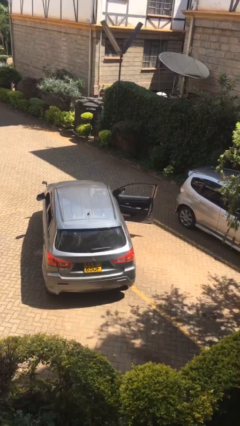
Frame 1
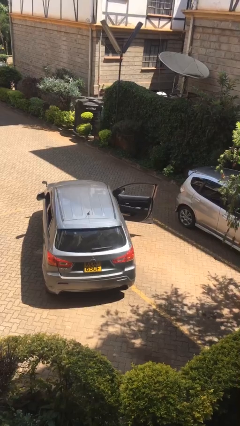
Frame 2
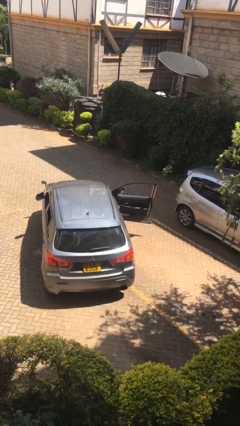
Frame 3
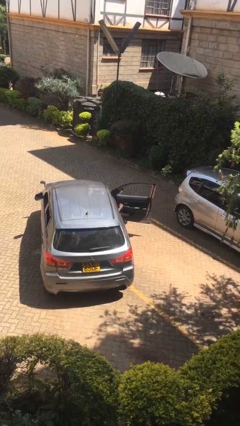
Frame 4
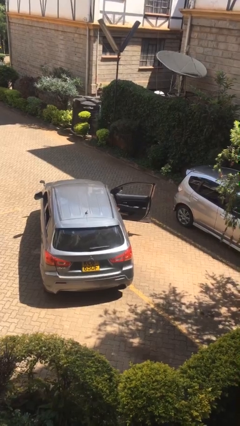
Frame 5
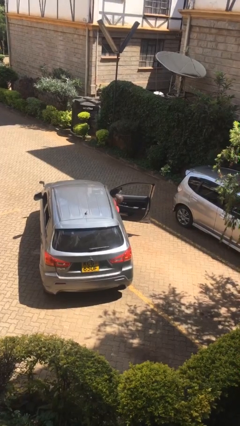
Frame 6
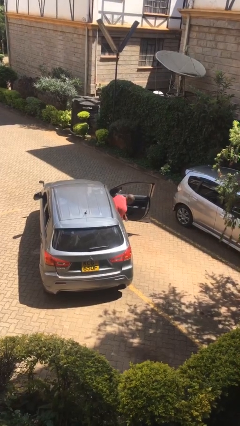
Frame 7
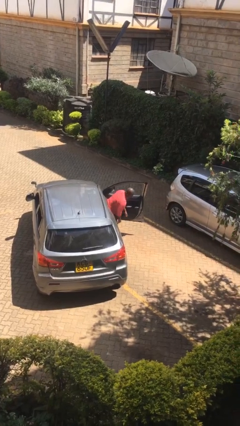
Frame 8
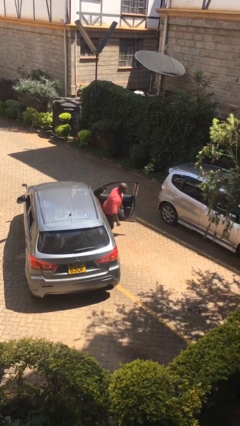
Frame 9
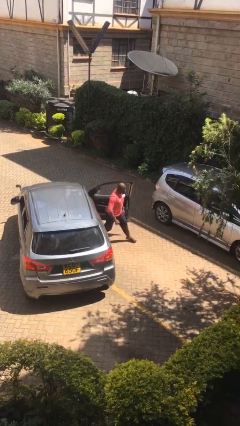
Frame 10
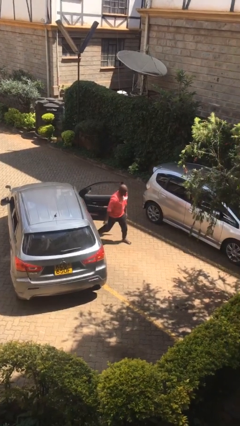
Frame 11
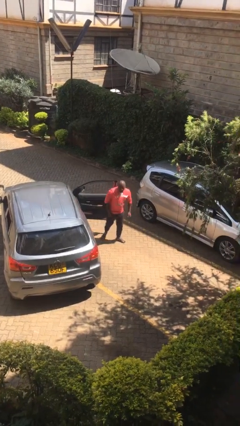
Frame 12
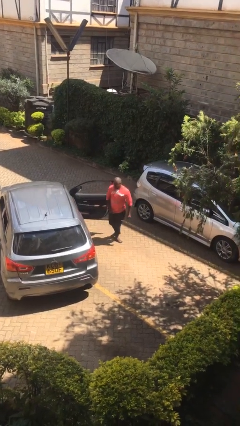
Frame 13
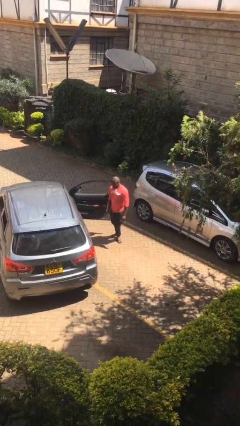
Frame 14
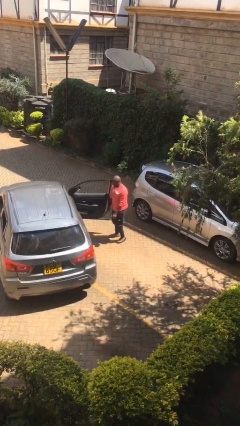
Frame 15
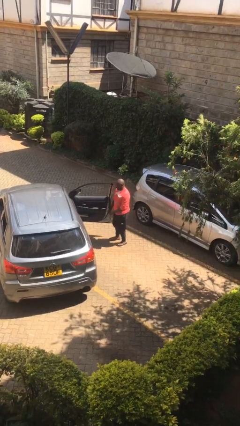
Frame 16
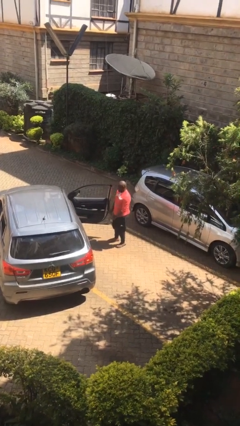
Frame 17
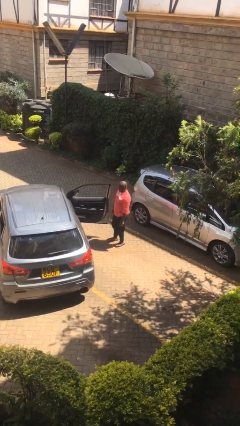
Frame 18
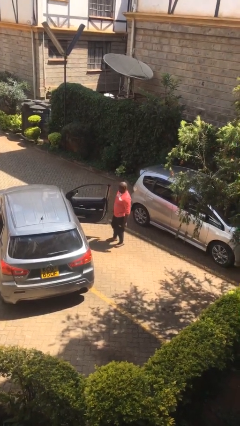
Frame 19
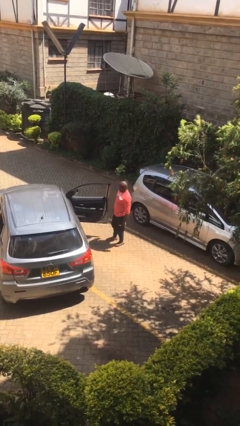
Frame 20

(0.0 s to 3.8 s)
person exits car

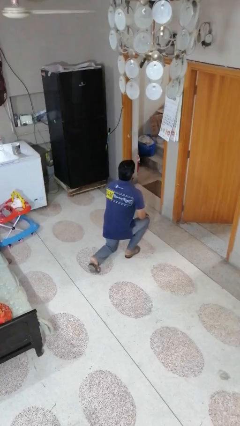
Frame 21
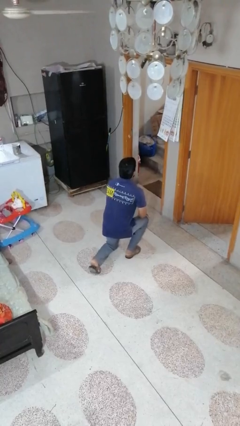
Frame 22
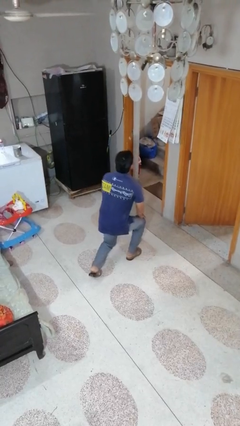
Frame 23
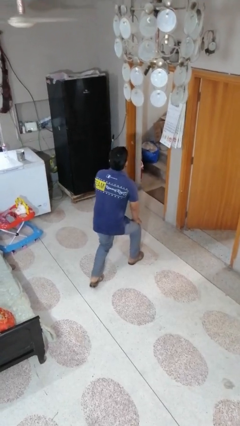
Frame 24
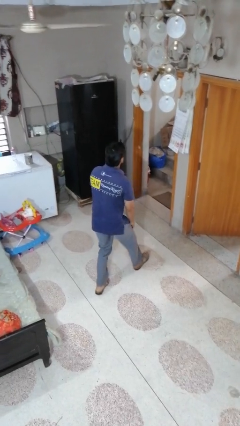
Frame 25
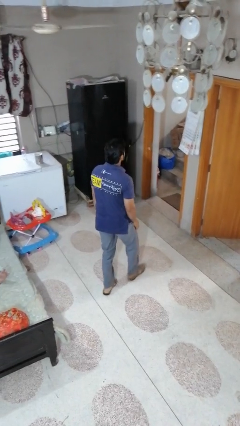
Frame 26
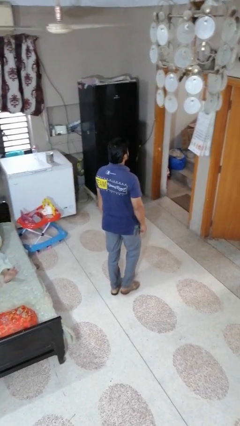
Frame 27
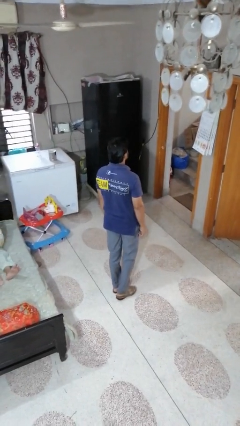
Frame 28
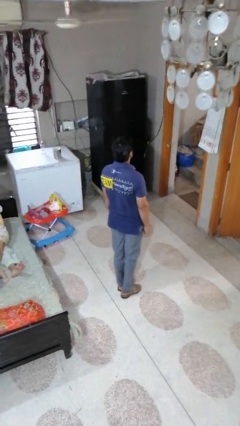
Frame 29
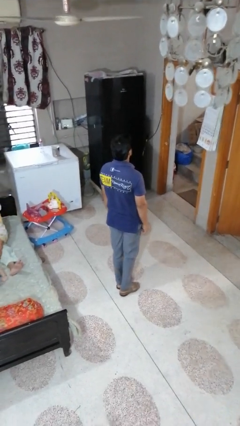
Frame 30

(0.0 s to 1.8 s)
person stands up from floor

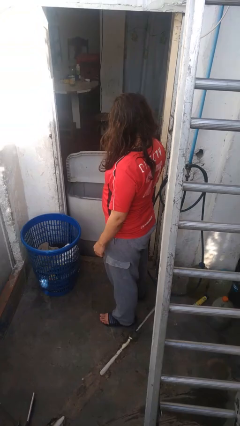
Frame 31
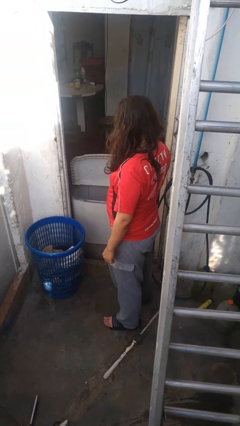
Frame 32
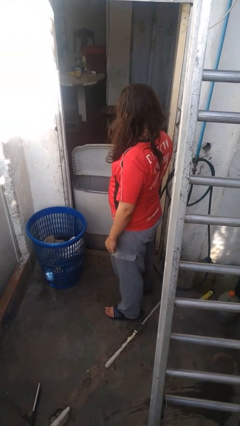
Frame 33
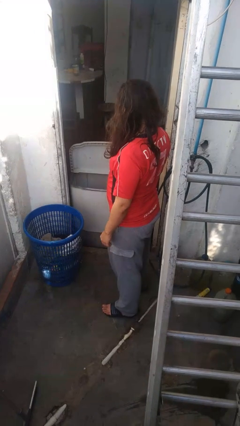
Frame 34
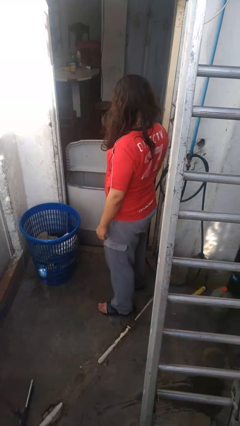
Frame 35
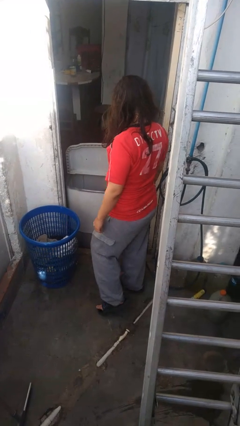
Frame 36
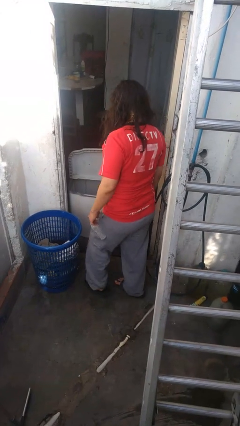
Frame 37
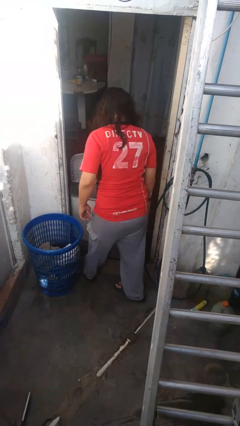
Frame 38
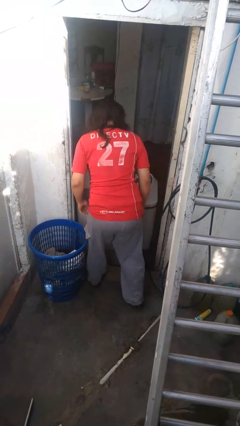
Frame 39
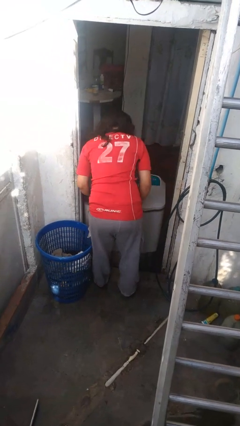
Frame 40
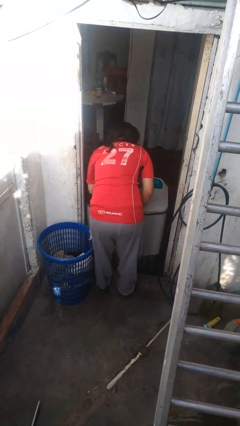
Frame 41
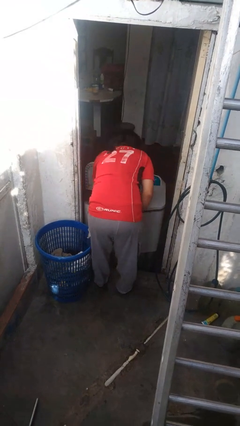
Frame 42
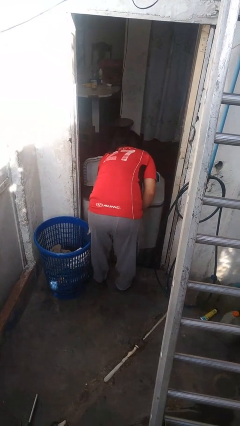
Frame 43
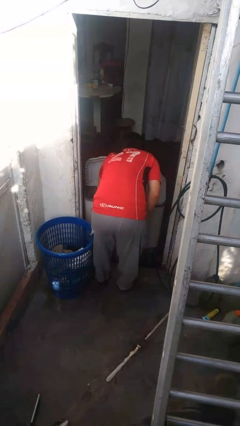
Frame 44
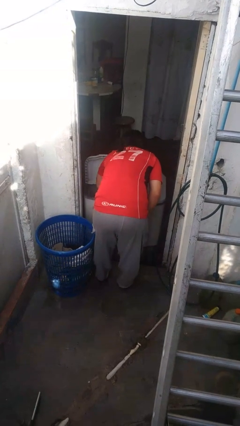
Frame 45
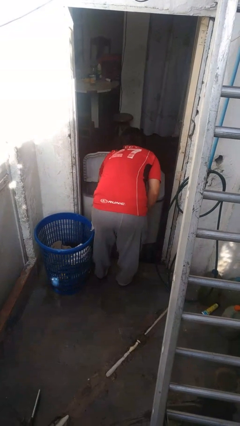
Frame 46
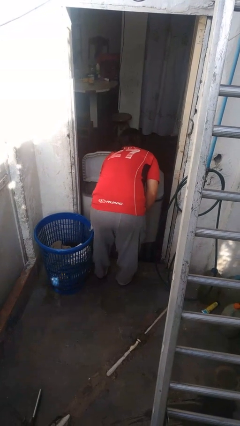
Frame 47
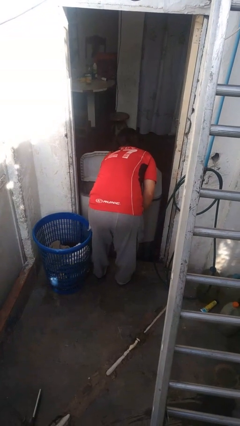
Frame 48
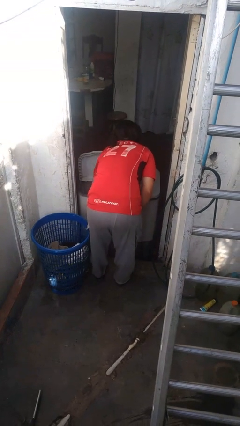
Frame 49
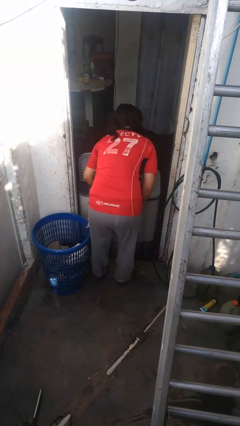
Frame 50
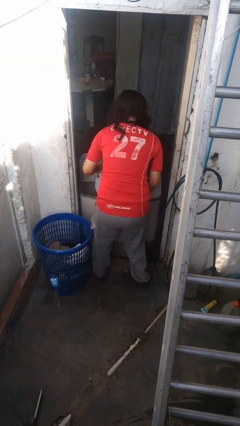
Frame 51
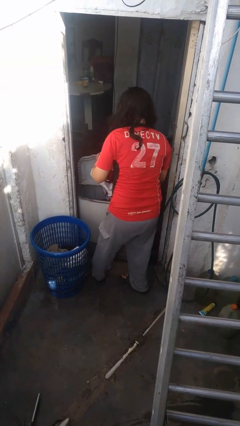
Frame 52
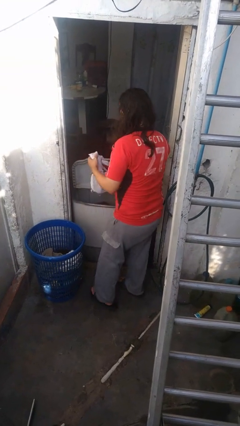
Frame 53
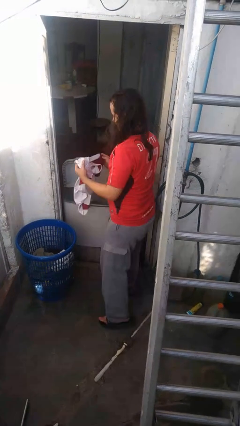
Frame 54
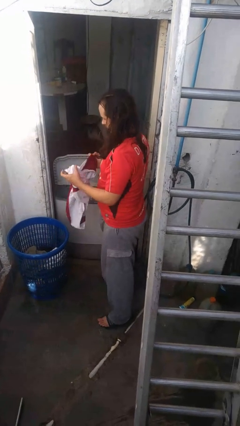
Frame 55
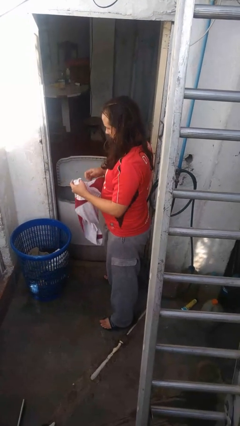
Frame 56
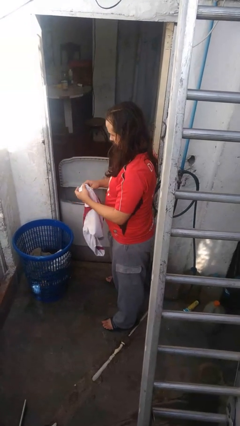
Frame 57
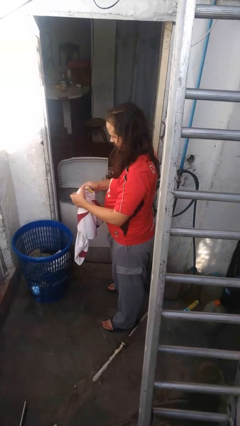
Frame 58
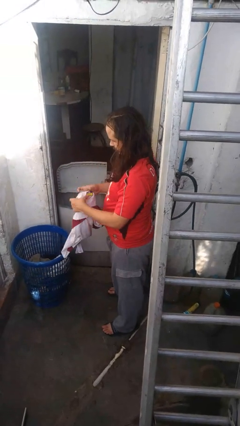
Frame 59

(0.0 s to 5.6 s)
person unloads clotheswasher

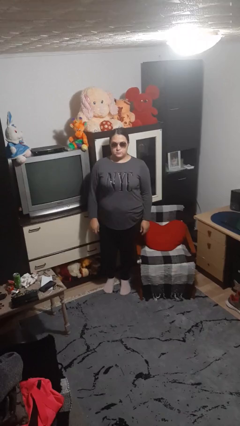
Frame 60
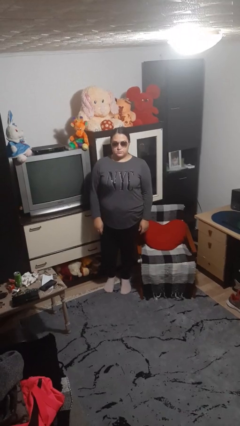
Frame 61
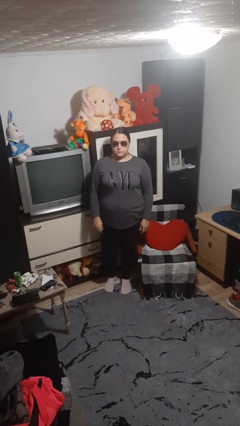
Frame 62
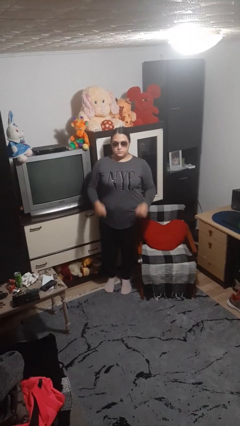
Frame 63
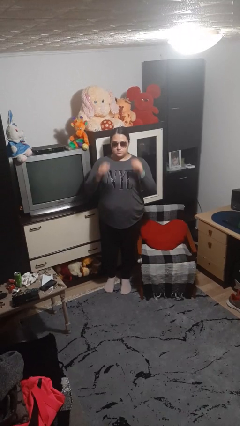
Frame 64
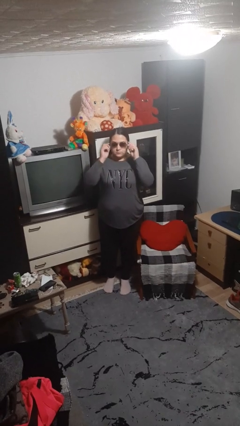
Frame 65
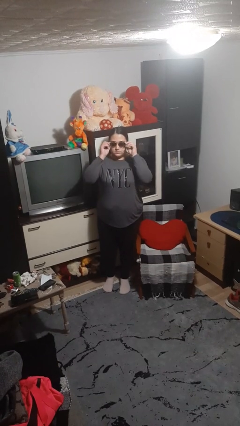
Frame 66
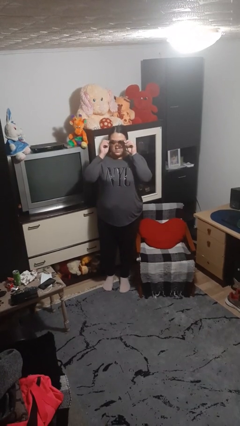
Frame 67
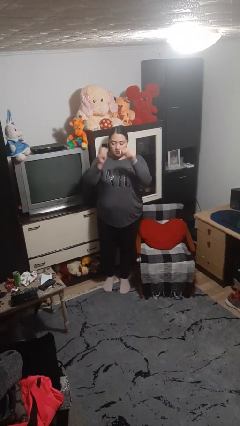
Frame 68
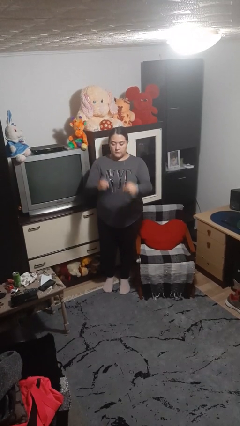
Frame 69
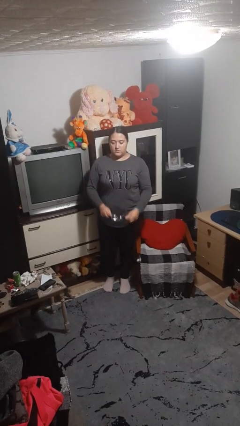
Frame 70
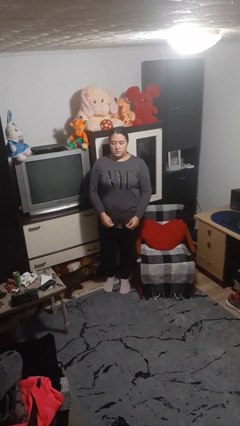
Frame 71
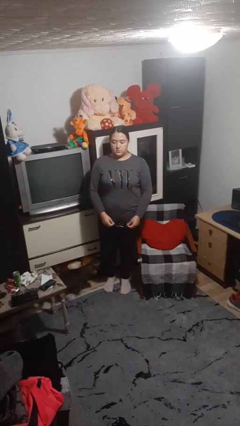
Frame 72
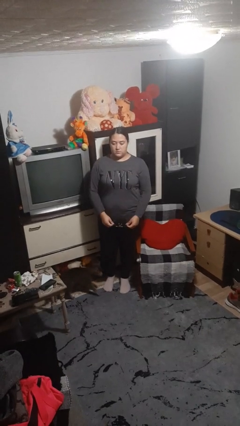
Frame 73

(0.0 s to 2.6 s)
person takes off sunglasses

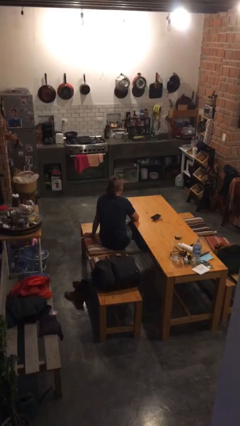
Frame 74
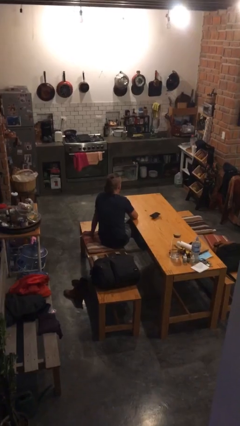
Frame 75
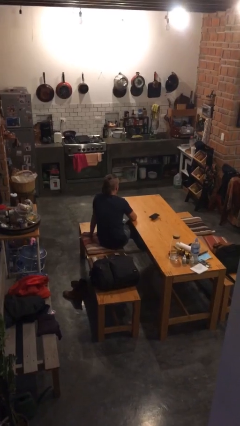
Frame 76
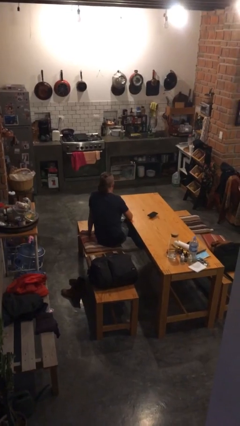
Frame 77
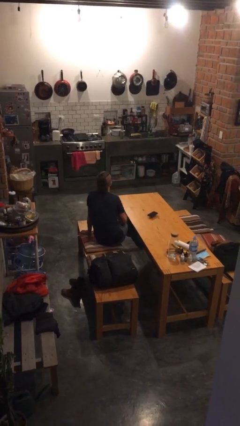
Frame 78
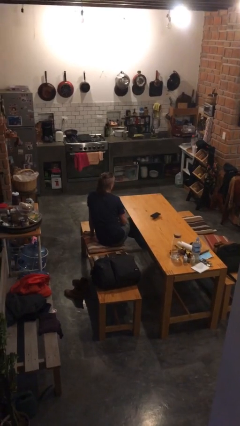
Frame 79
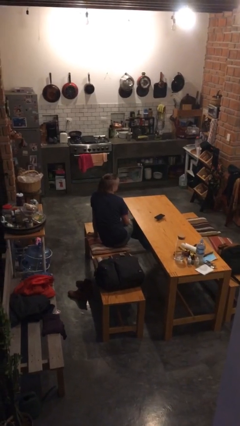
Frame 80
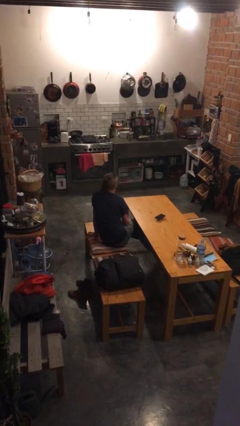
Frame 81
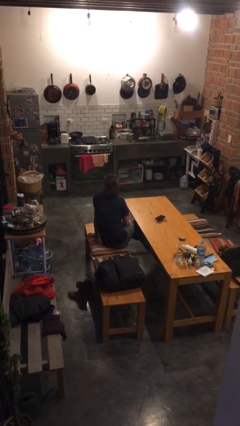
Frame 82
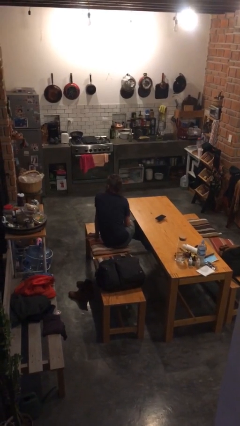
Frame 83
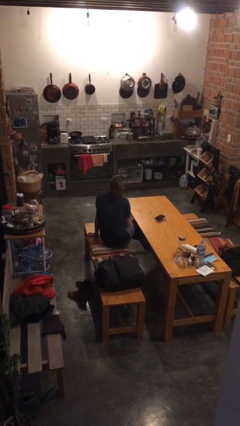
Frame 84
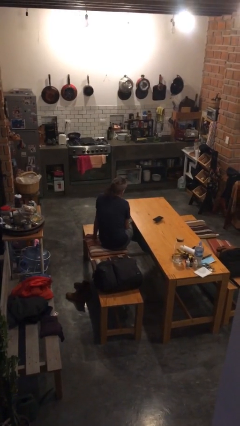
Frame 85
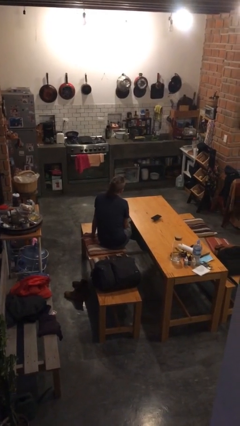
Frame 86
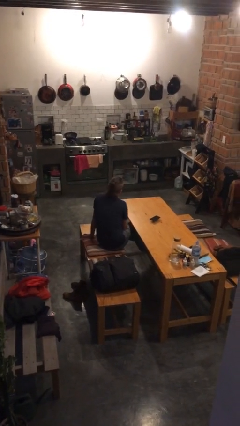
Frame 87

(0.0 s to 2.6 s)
person shakes head

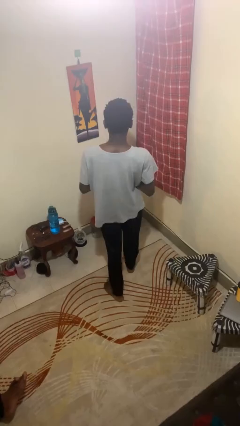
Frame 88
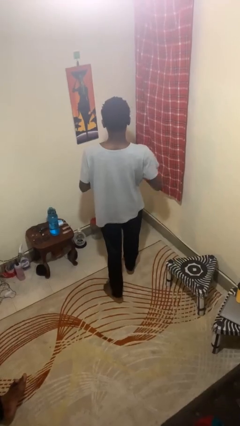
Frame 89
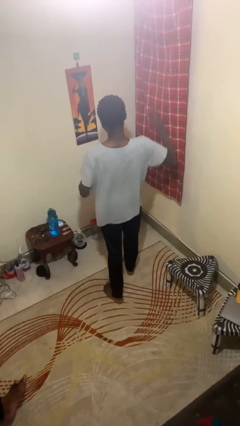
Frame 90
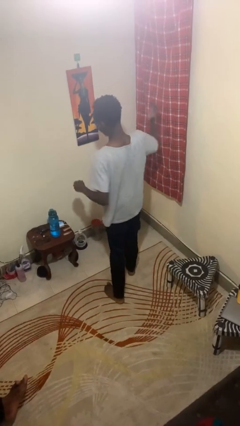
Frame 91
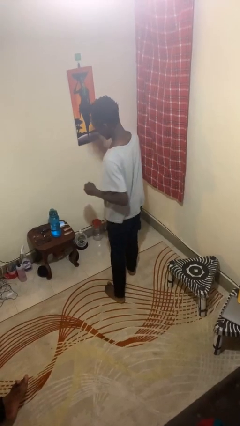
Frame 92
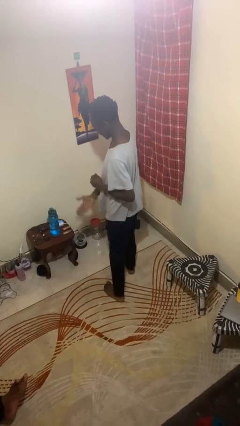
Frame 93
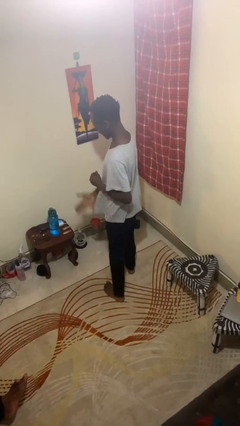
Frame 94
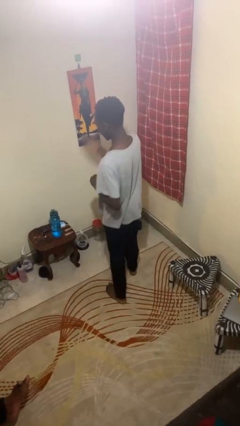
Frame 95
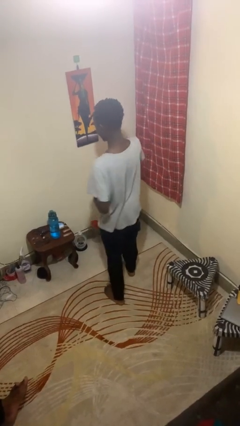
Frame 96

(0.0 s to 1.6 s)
person karate chop
